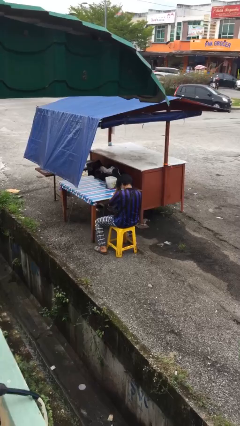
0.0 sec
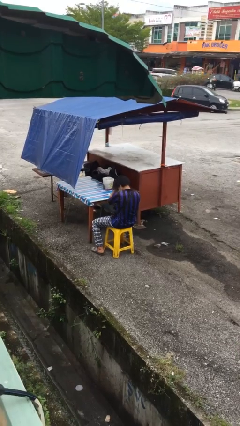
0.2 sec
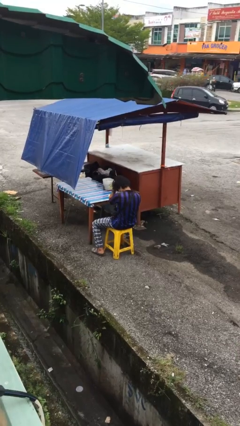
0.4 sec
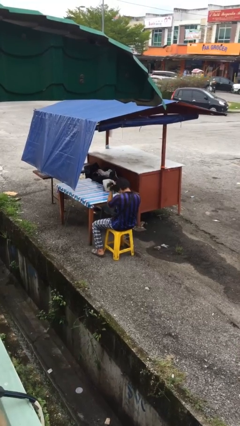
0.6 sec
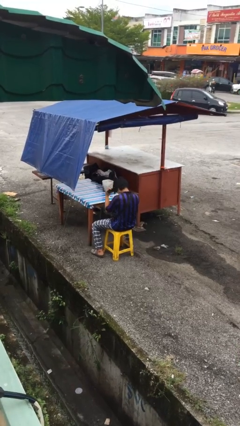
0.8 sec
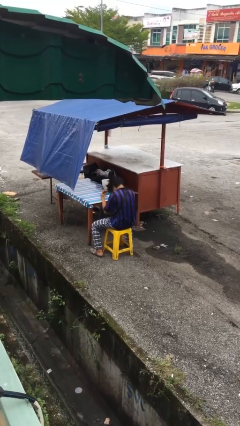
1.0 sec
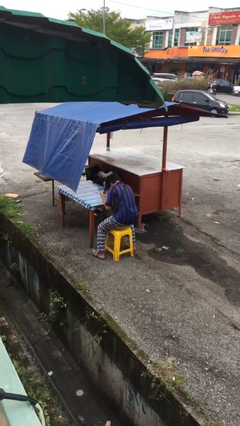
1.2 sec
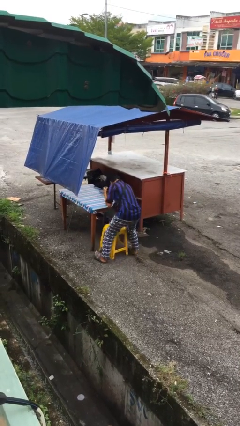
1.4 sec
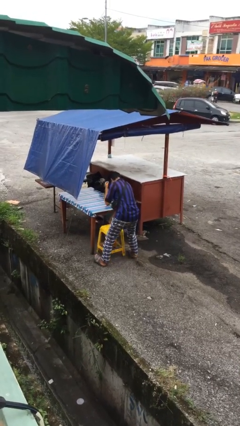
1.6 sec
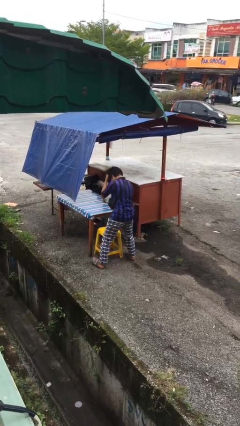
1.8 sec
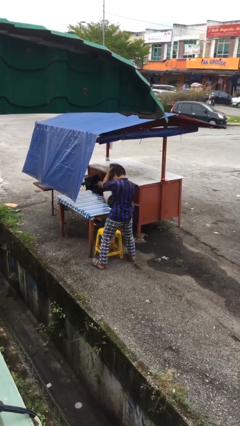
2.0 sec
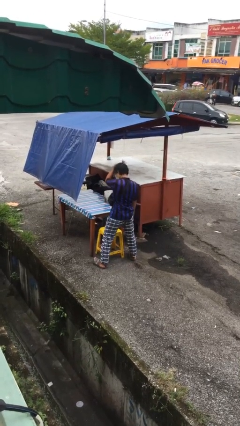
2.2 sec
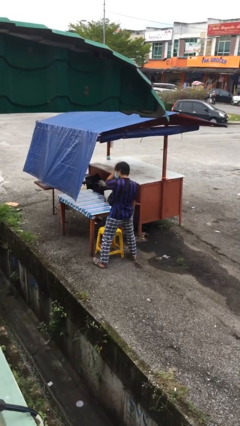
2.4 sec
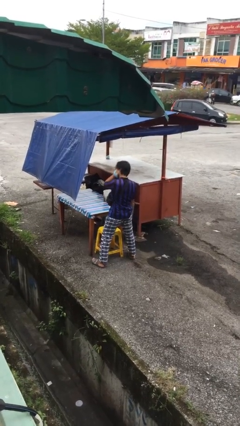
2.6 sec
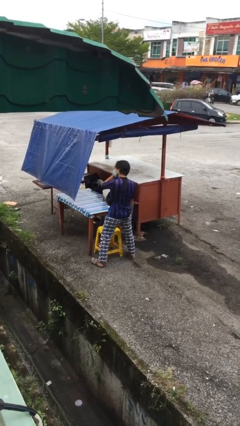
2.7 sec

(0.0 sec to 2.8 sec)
person stands up

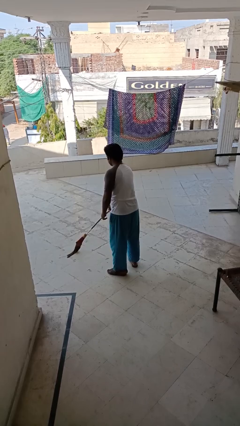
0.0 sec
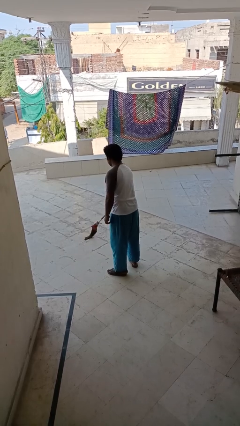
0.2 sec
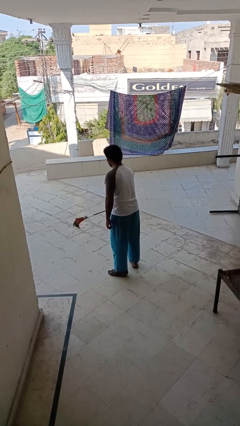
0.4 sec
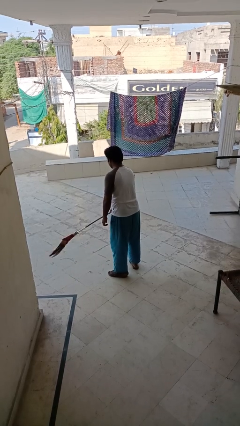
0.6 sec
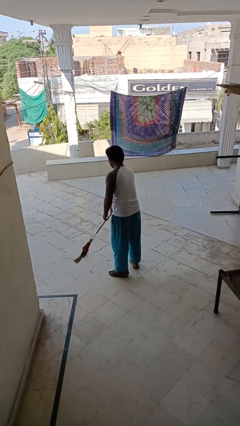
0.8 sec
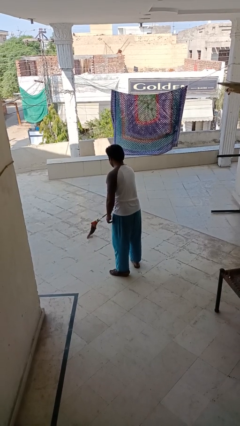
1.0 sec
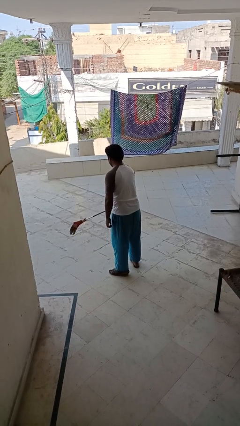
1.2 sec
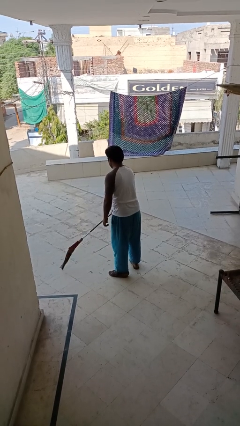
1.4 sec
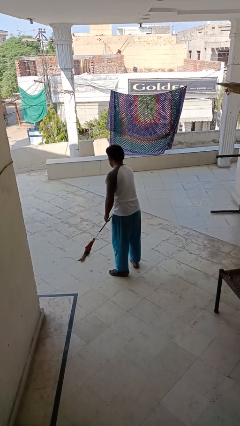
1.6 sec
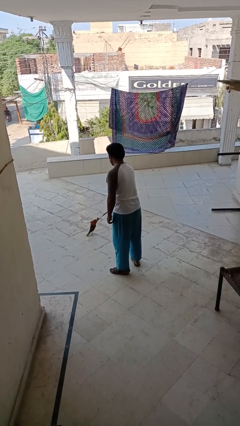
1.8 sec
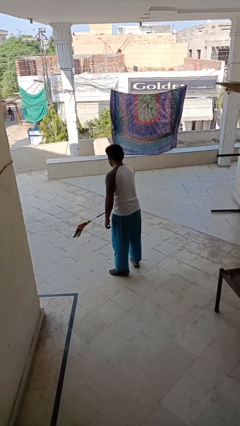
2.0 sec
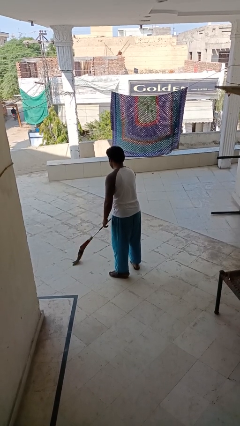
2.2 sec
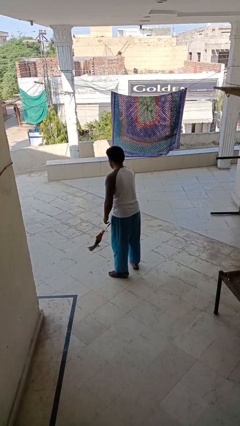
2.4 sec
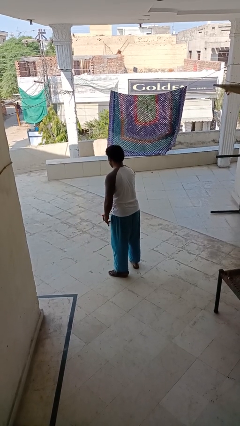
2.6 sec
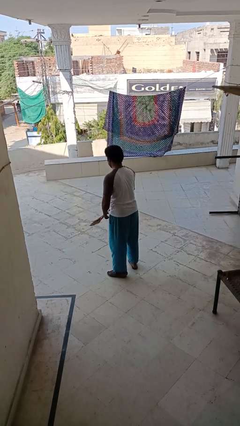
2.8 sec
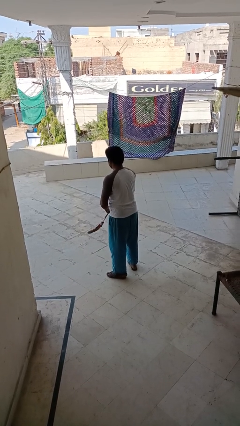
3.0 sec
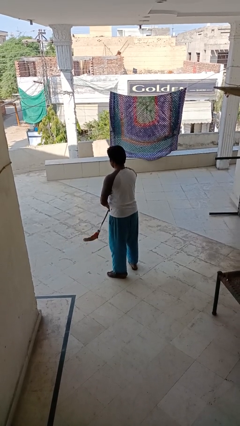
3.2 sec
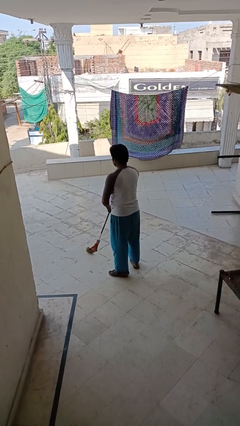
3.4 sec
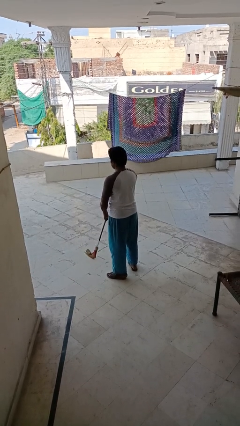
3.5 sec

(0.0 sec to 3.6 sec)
person sweeps floor

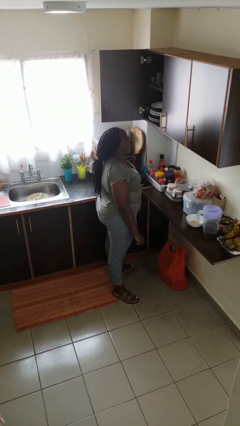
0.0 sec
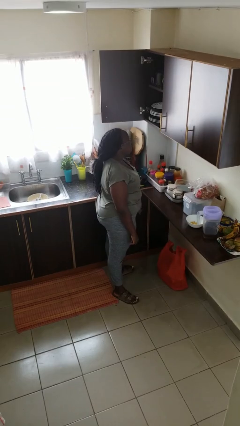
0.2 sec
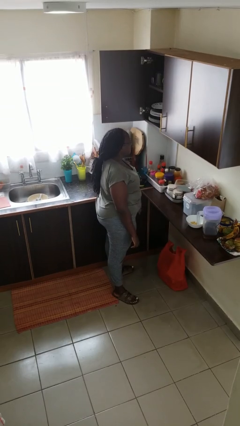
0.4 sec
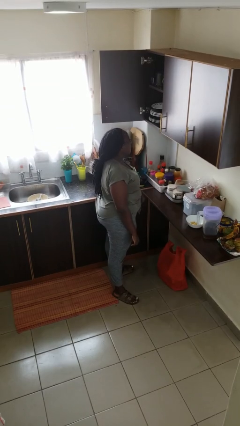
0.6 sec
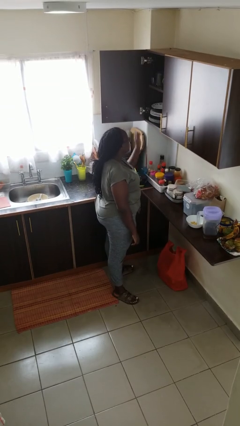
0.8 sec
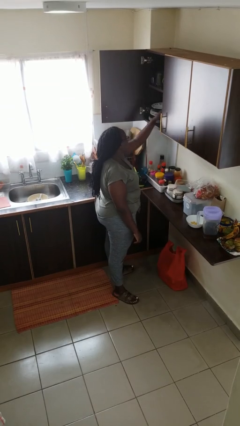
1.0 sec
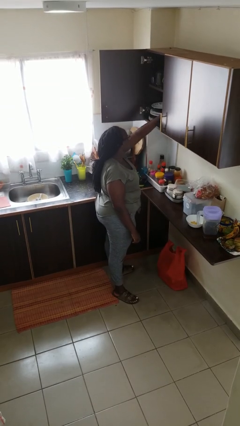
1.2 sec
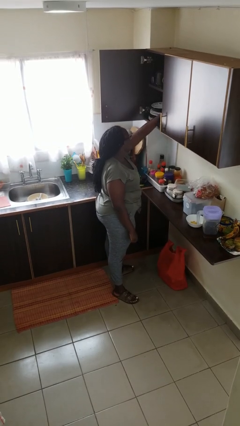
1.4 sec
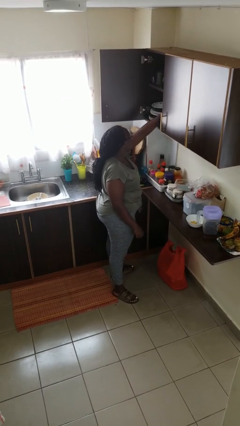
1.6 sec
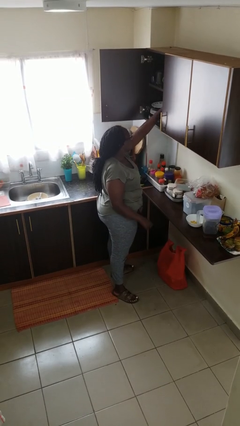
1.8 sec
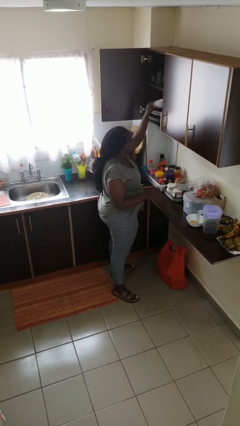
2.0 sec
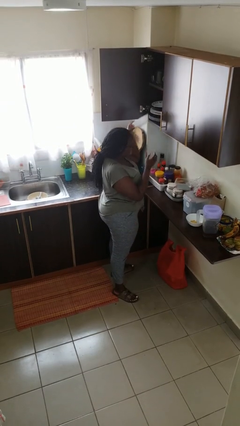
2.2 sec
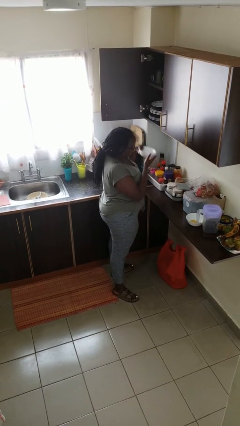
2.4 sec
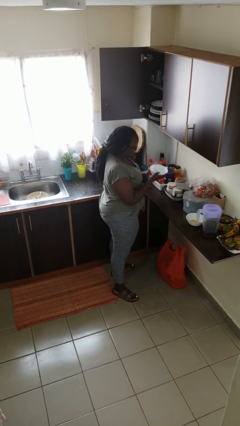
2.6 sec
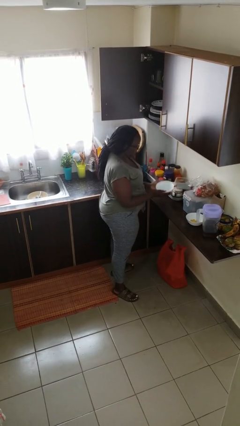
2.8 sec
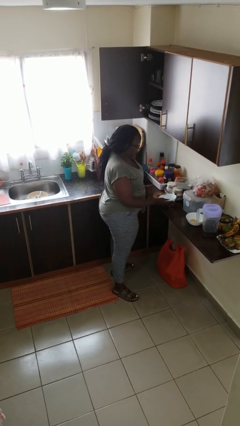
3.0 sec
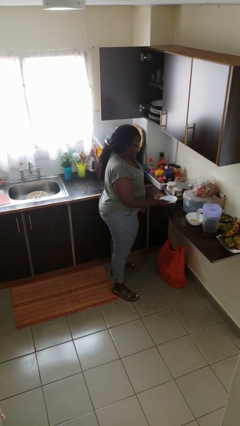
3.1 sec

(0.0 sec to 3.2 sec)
person takes object from cabinet

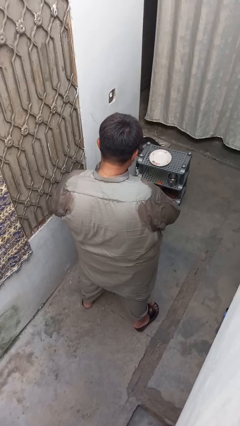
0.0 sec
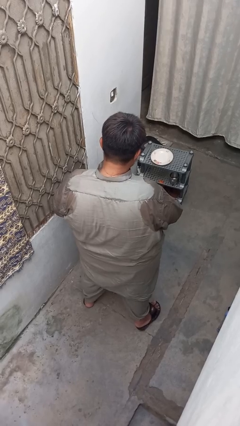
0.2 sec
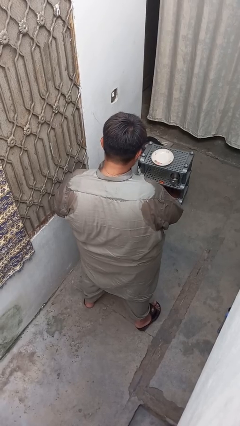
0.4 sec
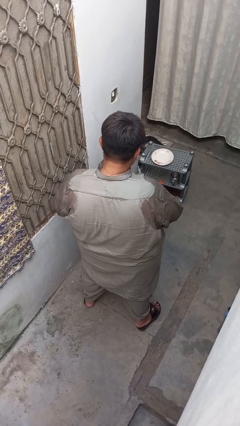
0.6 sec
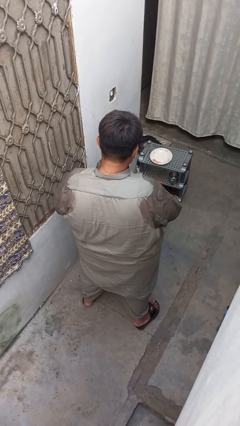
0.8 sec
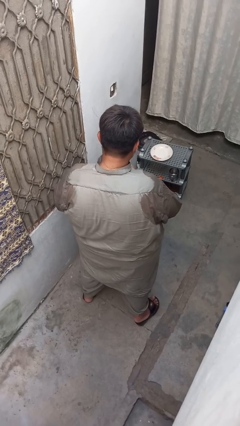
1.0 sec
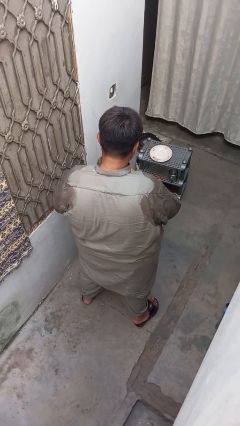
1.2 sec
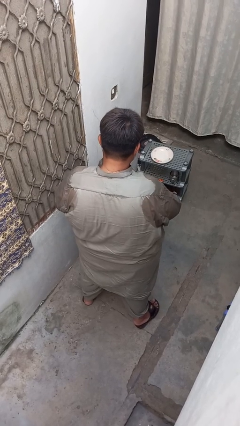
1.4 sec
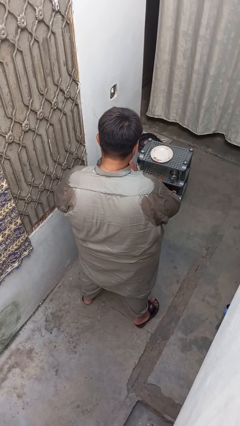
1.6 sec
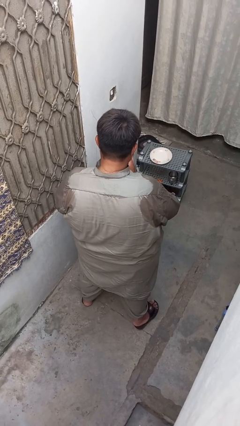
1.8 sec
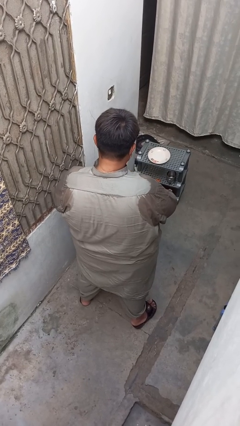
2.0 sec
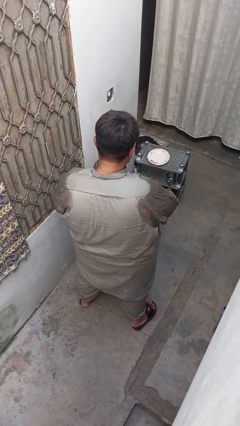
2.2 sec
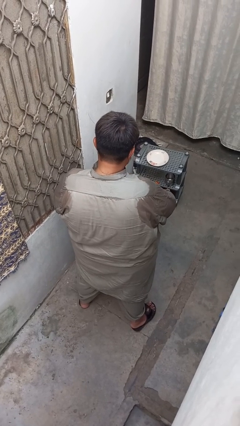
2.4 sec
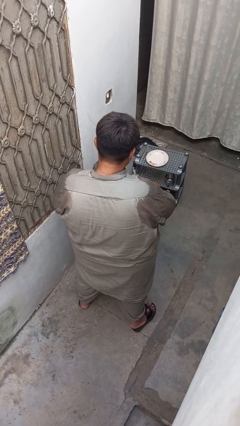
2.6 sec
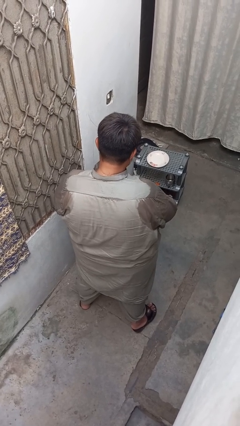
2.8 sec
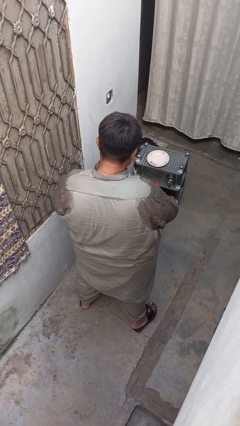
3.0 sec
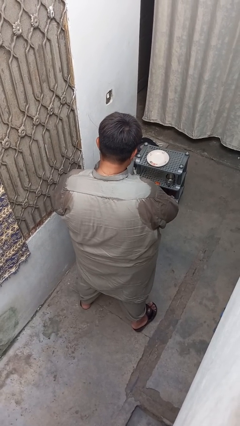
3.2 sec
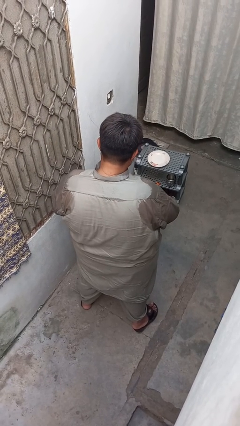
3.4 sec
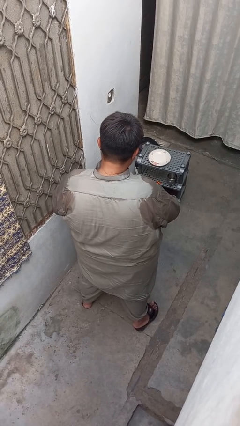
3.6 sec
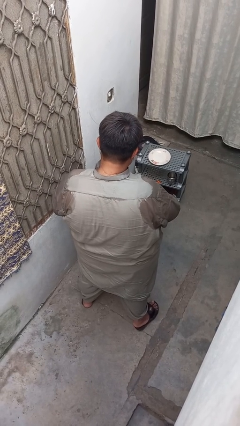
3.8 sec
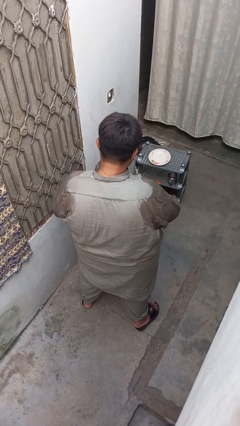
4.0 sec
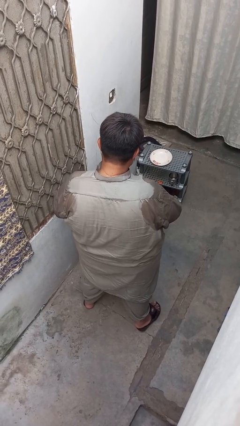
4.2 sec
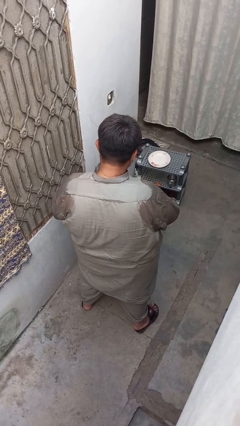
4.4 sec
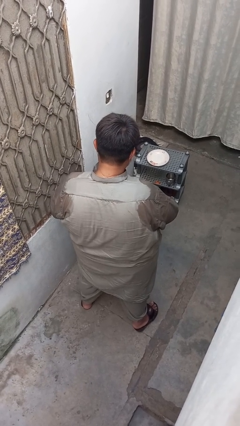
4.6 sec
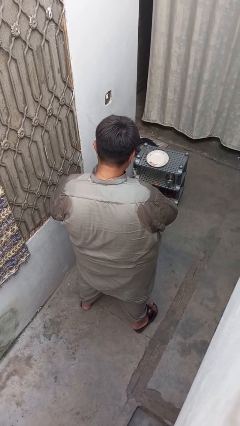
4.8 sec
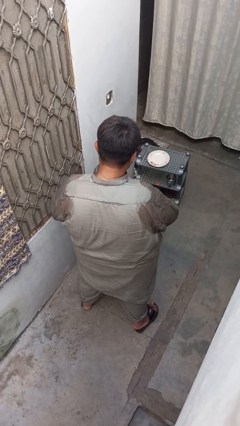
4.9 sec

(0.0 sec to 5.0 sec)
person puts on wristwatch

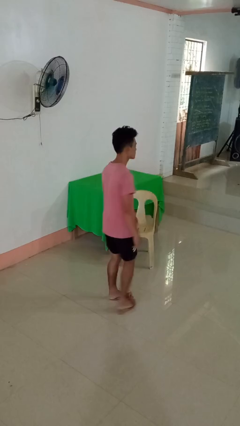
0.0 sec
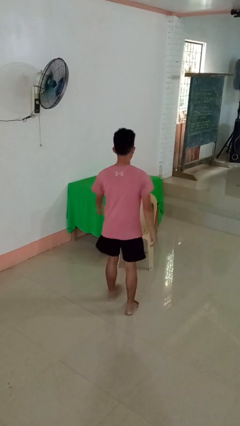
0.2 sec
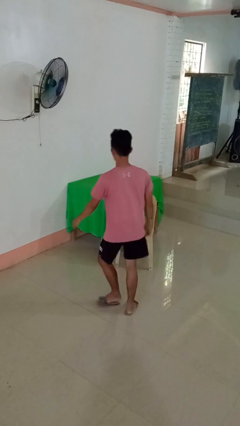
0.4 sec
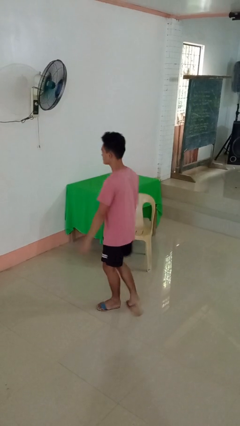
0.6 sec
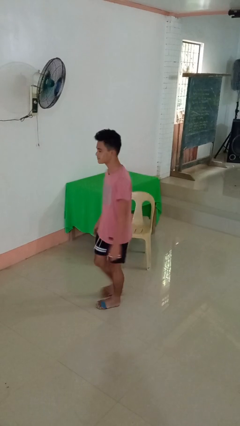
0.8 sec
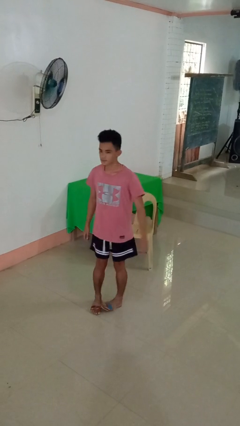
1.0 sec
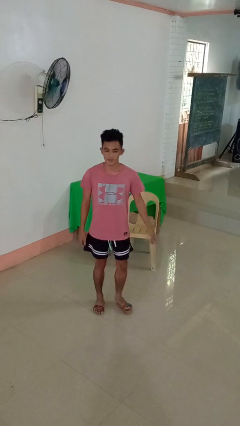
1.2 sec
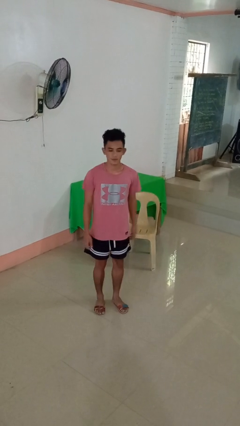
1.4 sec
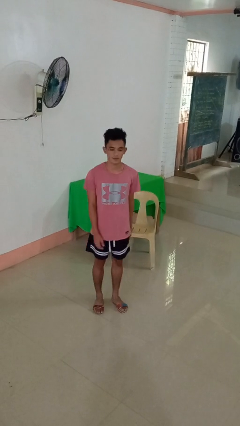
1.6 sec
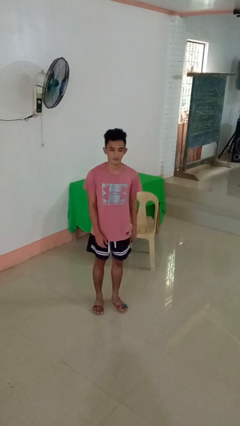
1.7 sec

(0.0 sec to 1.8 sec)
person twirls

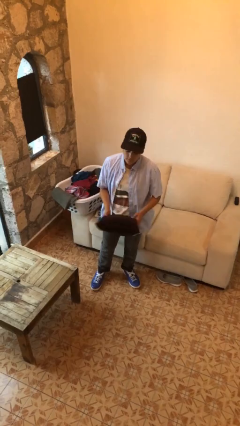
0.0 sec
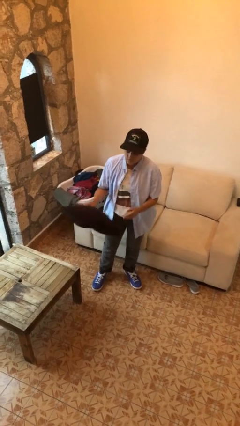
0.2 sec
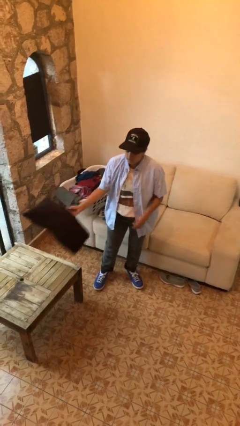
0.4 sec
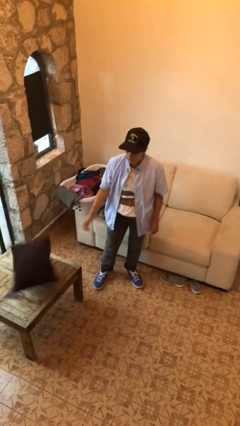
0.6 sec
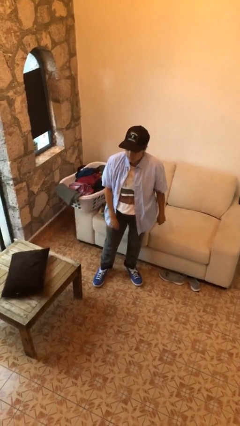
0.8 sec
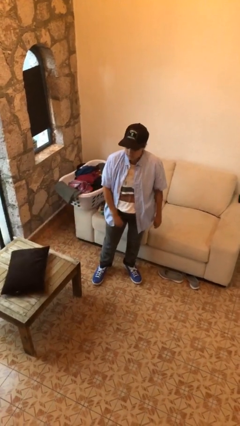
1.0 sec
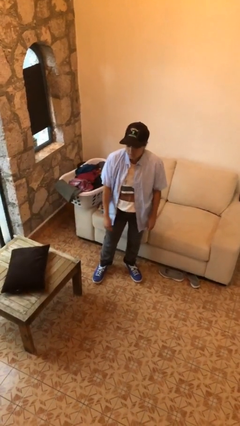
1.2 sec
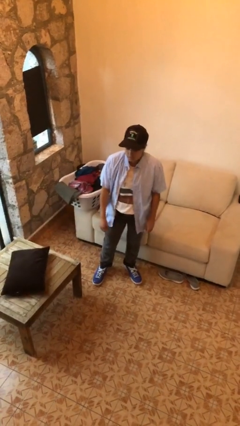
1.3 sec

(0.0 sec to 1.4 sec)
person throws object on table
